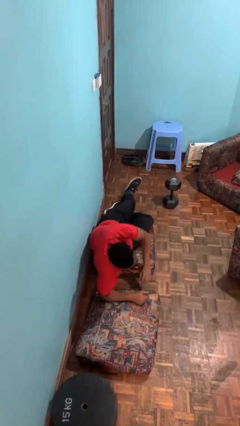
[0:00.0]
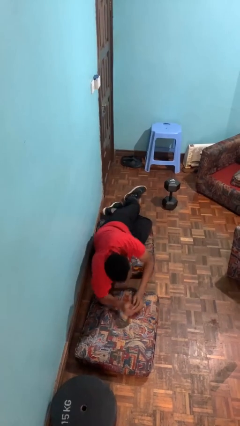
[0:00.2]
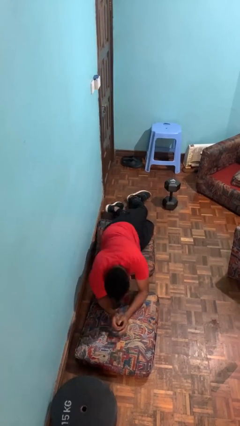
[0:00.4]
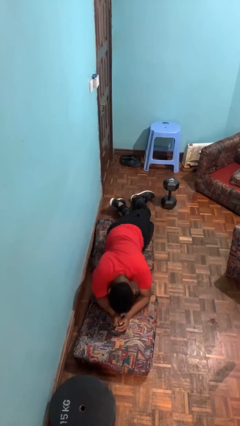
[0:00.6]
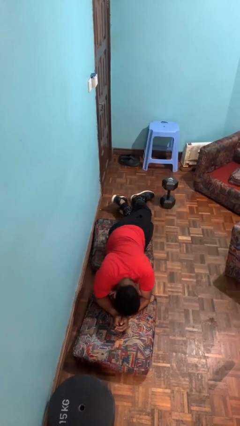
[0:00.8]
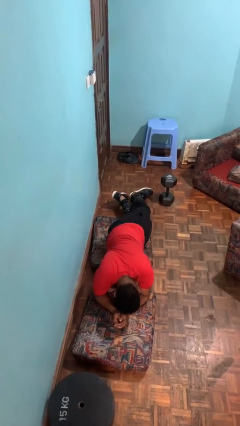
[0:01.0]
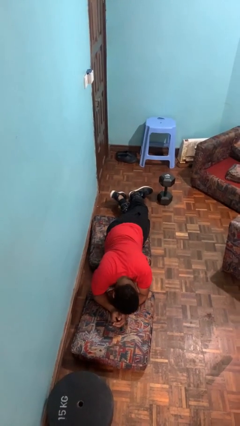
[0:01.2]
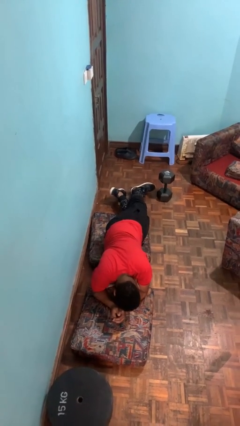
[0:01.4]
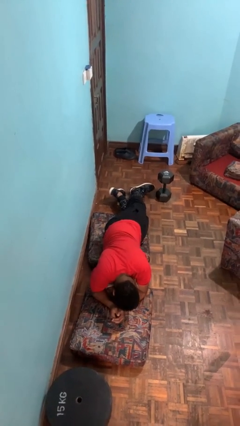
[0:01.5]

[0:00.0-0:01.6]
person lies down on floor

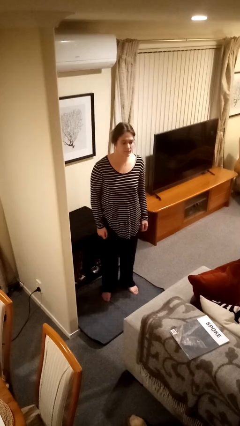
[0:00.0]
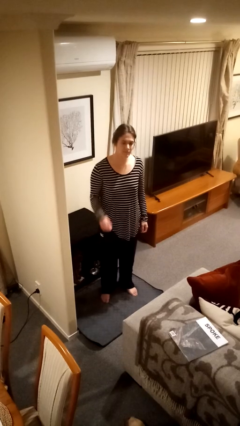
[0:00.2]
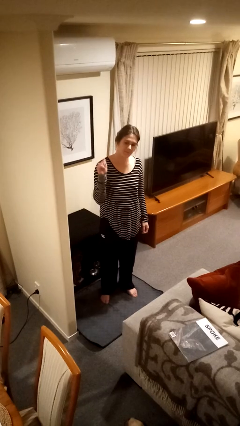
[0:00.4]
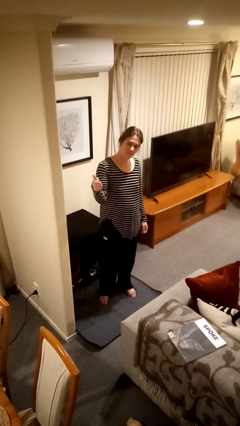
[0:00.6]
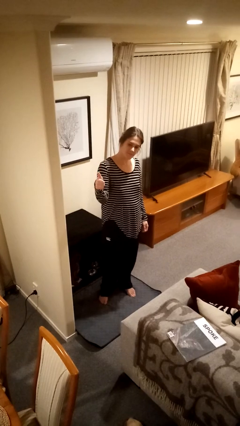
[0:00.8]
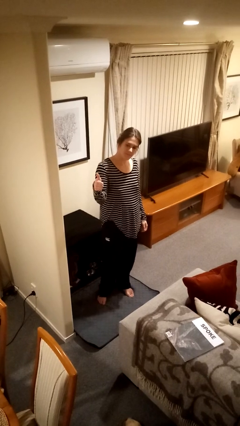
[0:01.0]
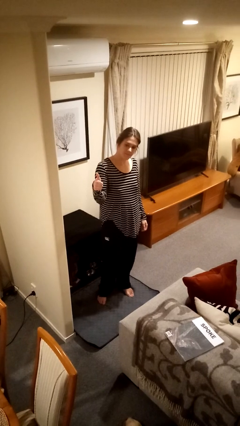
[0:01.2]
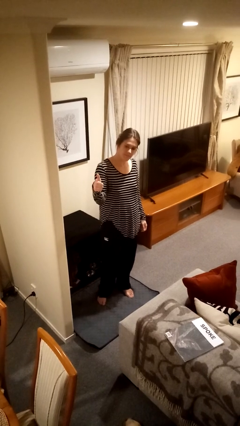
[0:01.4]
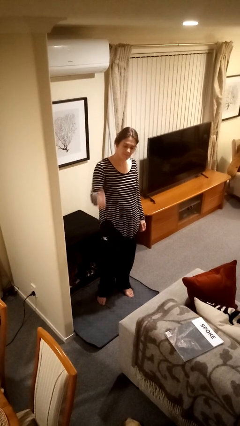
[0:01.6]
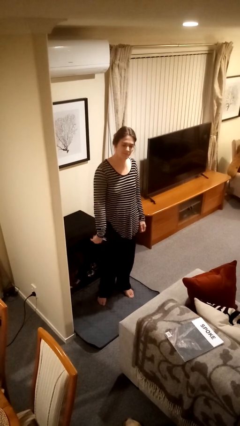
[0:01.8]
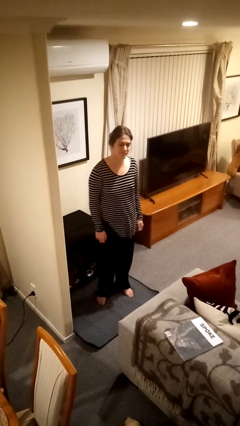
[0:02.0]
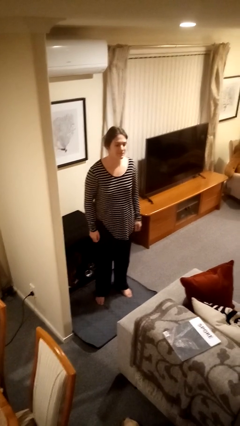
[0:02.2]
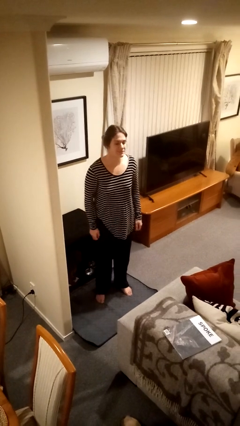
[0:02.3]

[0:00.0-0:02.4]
person gestures thumbs up

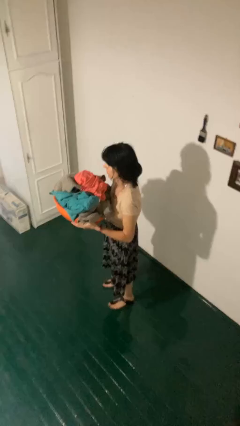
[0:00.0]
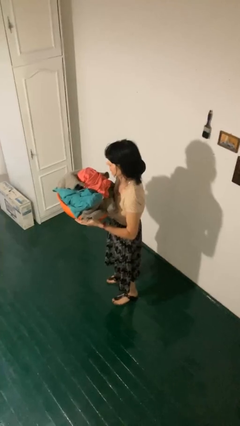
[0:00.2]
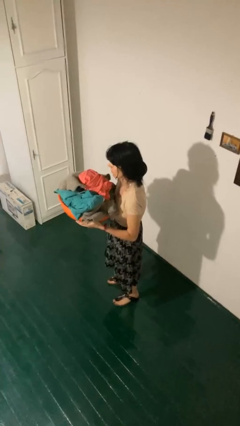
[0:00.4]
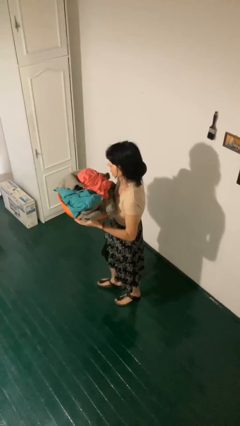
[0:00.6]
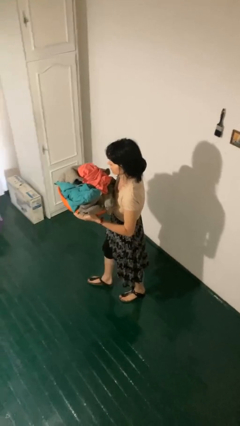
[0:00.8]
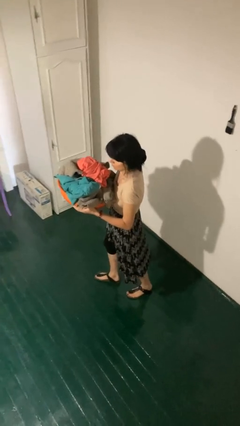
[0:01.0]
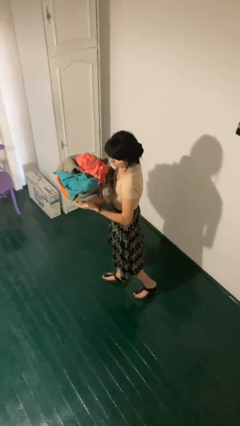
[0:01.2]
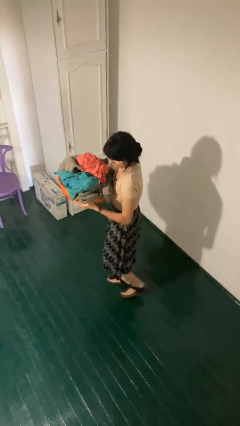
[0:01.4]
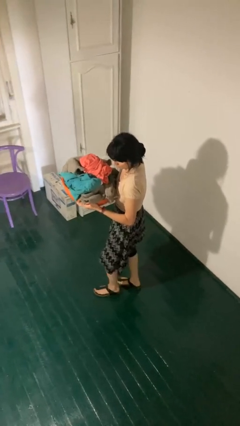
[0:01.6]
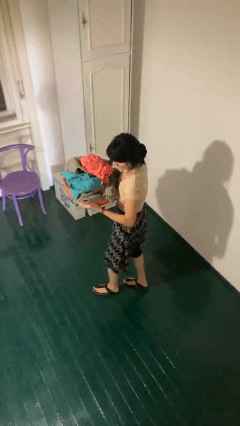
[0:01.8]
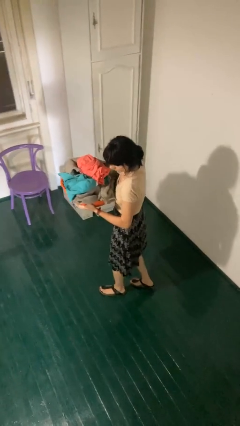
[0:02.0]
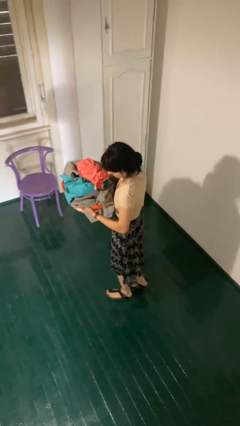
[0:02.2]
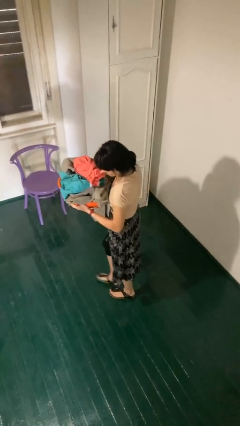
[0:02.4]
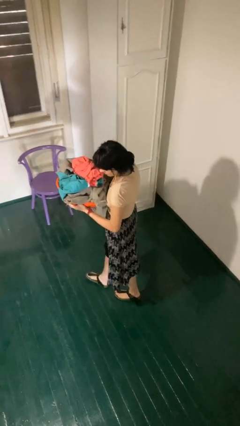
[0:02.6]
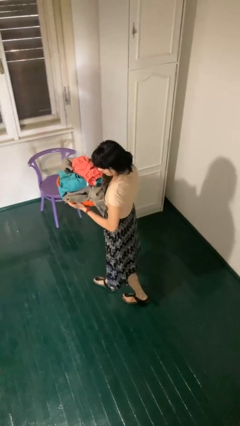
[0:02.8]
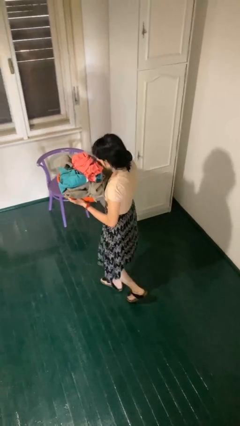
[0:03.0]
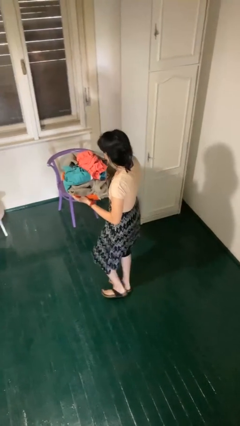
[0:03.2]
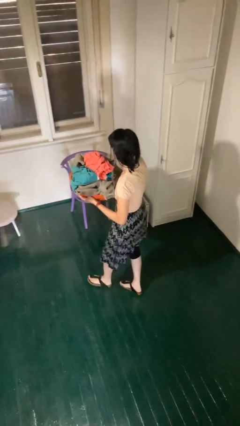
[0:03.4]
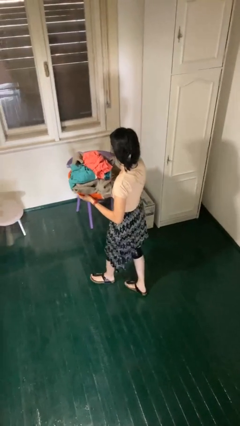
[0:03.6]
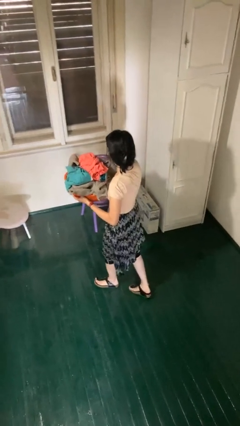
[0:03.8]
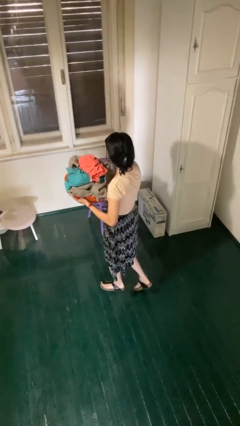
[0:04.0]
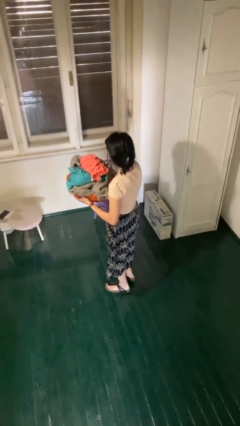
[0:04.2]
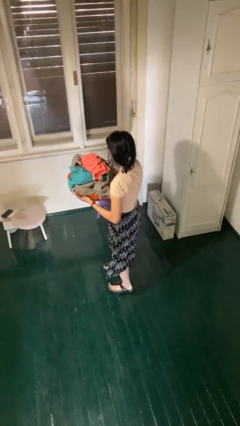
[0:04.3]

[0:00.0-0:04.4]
person carries laundry basket

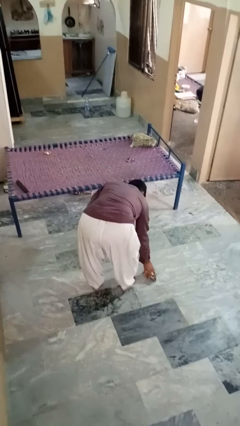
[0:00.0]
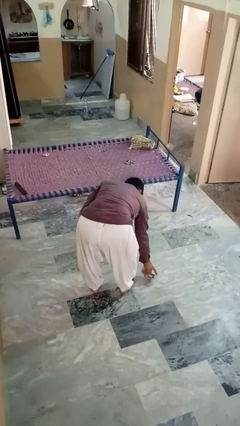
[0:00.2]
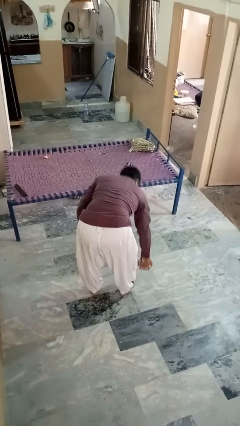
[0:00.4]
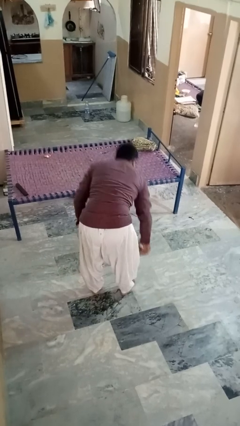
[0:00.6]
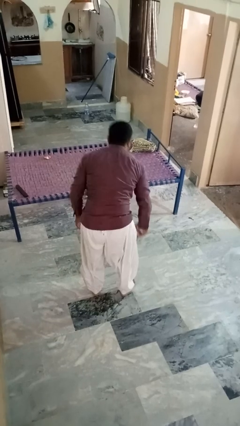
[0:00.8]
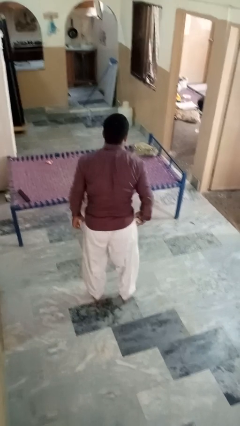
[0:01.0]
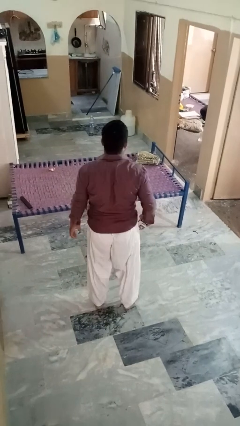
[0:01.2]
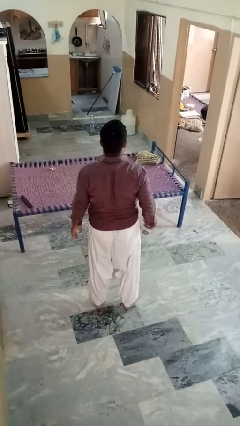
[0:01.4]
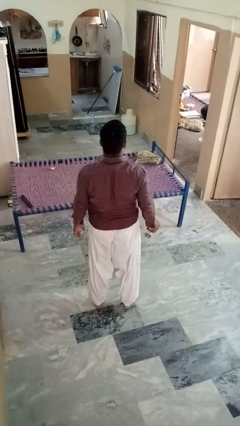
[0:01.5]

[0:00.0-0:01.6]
person picks up object from floor

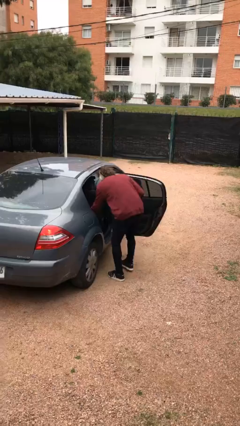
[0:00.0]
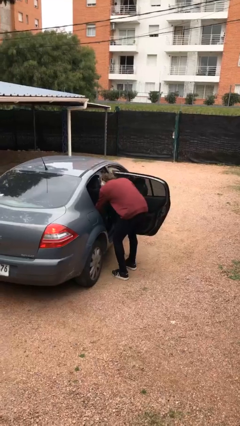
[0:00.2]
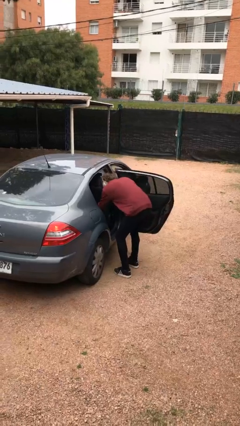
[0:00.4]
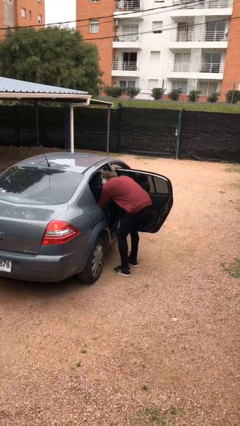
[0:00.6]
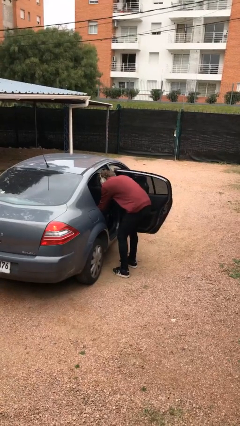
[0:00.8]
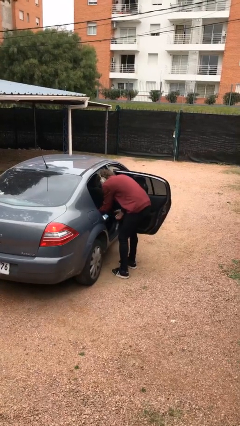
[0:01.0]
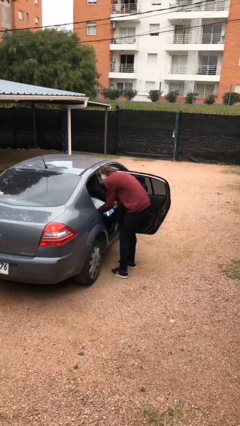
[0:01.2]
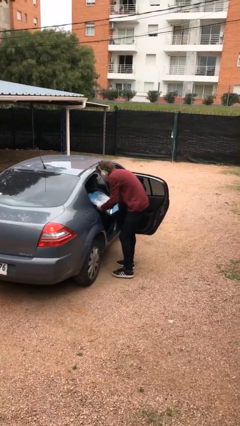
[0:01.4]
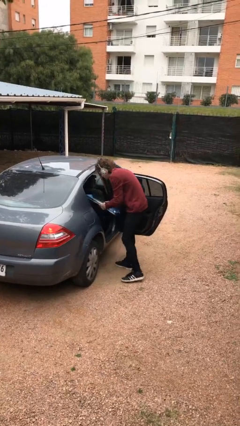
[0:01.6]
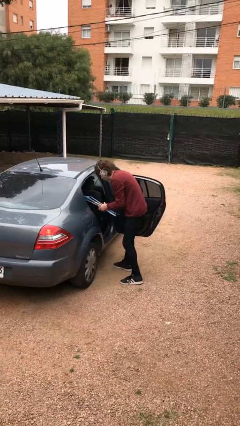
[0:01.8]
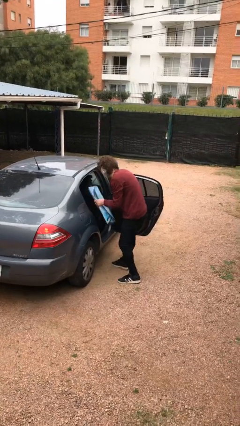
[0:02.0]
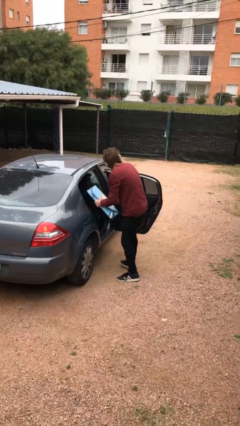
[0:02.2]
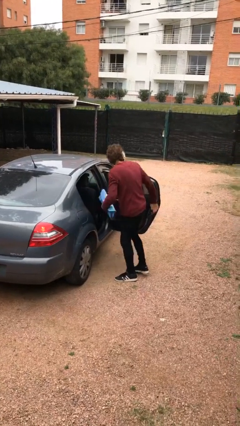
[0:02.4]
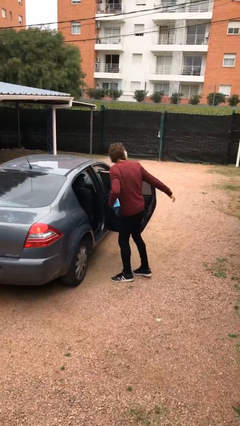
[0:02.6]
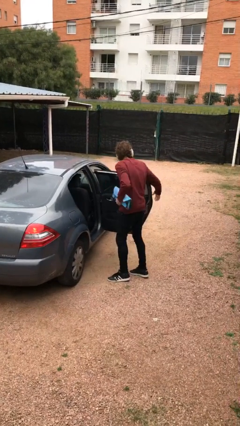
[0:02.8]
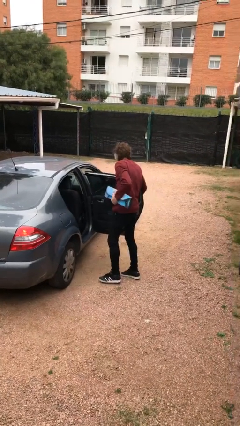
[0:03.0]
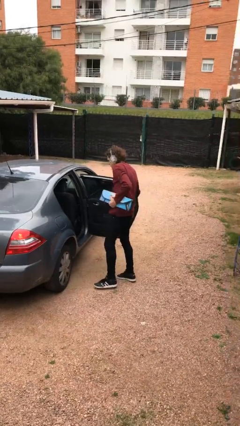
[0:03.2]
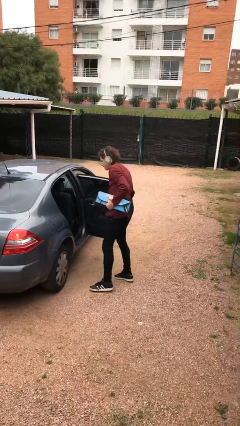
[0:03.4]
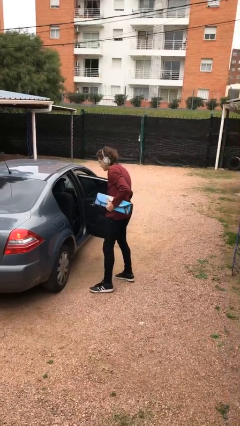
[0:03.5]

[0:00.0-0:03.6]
person unloads car

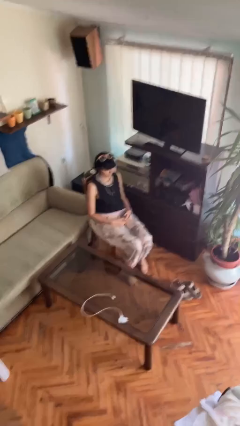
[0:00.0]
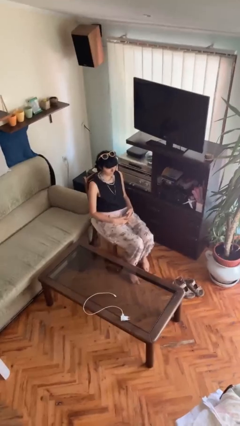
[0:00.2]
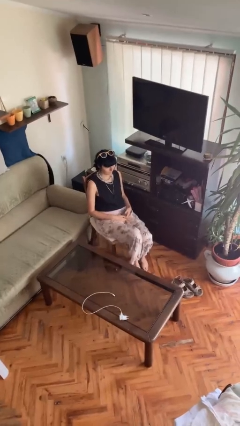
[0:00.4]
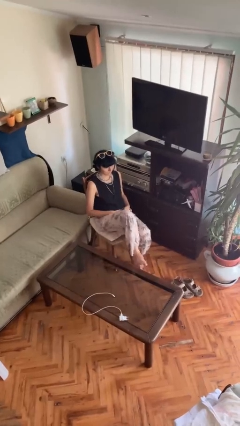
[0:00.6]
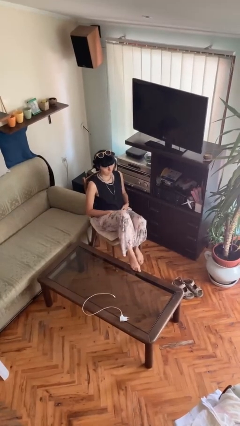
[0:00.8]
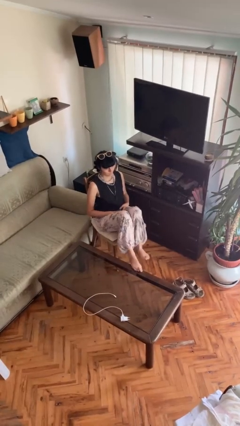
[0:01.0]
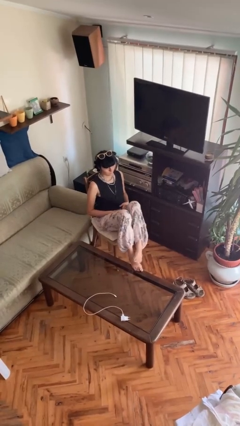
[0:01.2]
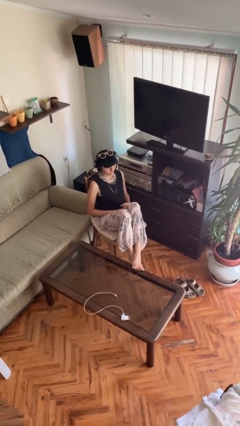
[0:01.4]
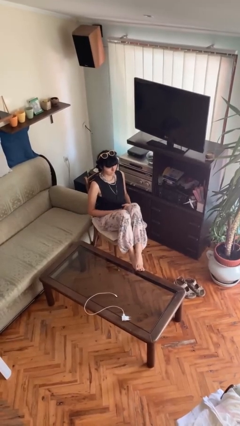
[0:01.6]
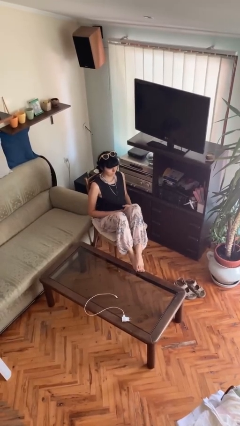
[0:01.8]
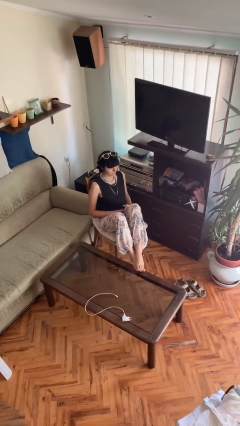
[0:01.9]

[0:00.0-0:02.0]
person puts feet up

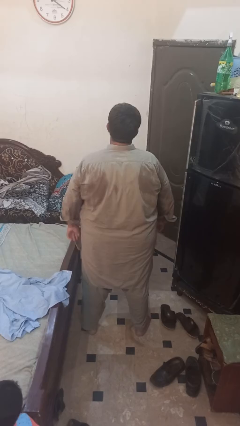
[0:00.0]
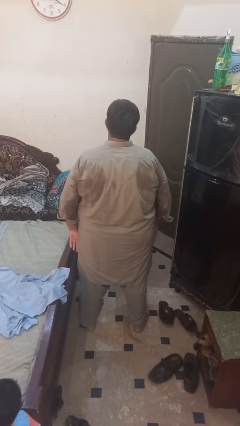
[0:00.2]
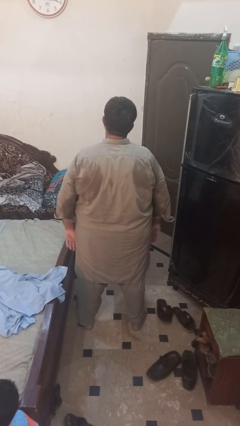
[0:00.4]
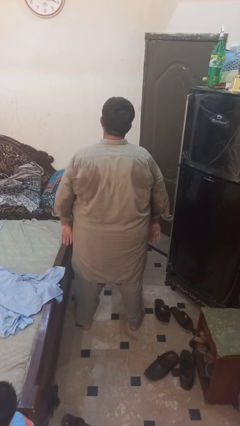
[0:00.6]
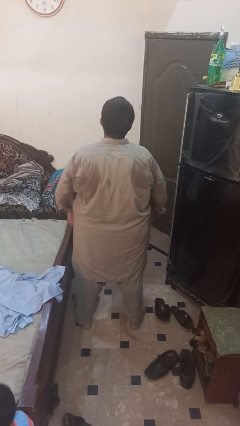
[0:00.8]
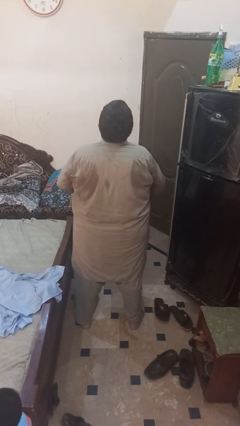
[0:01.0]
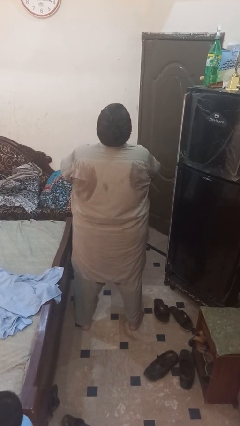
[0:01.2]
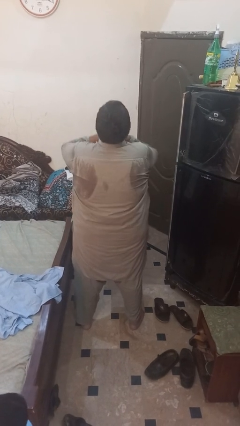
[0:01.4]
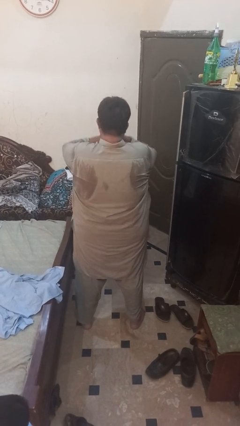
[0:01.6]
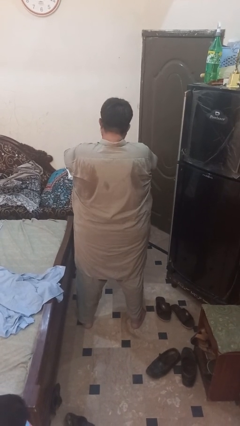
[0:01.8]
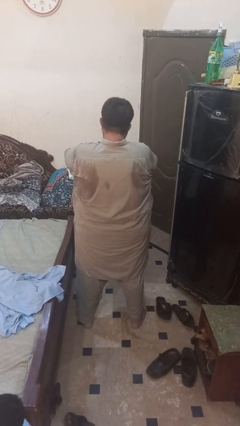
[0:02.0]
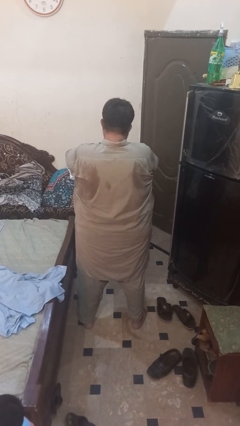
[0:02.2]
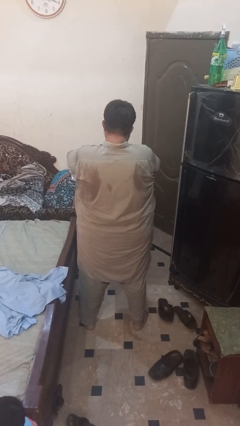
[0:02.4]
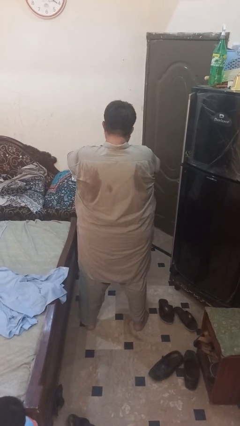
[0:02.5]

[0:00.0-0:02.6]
person sneezes into hand
